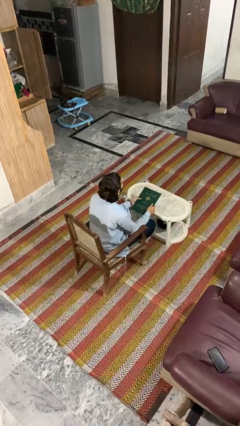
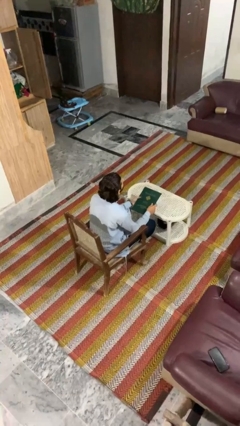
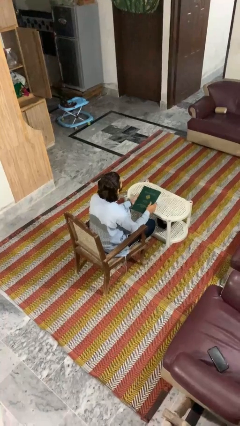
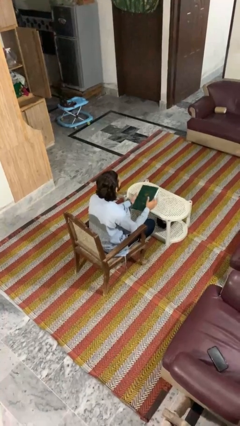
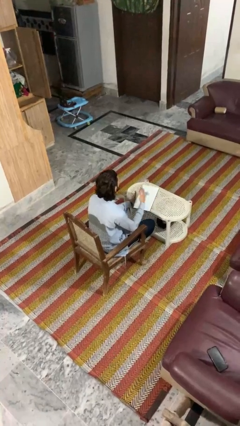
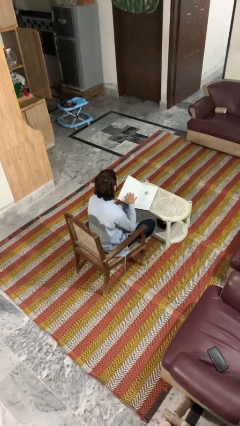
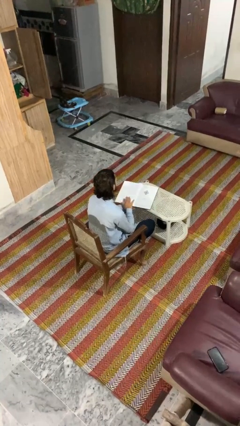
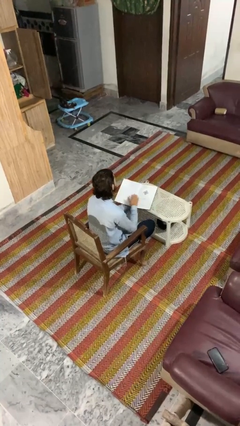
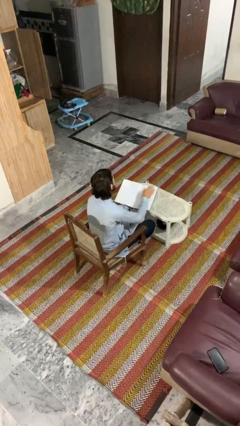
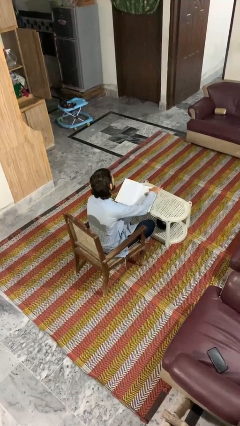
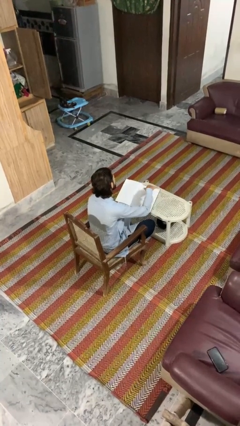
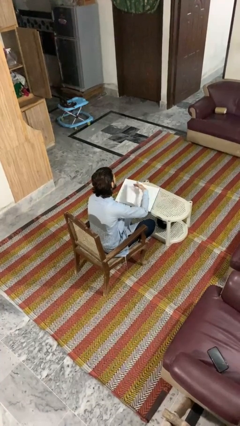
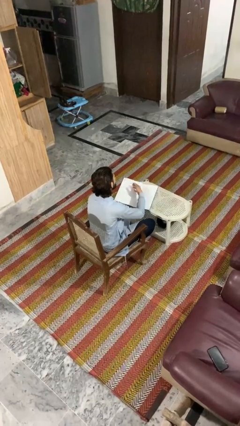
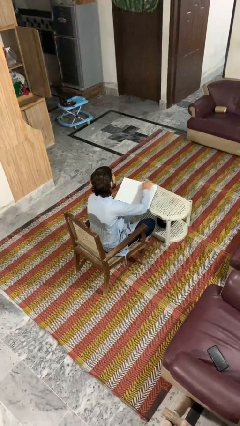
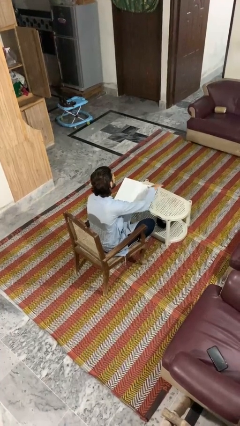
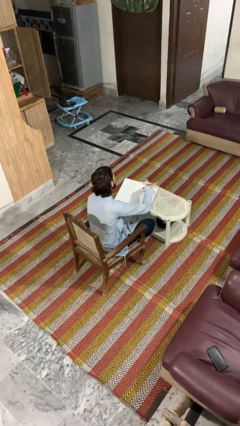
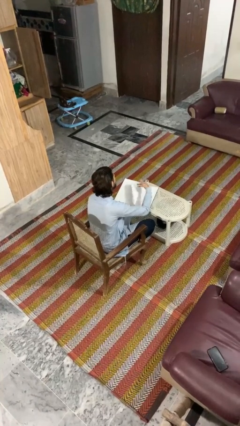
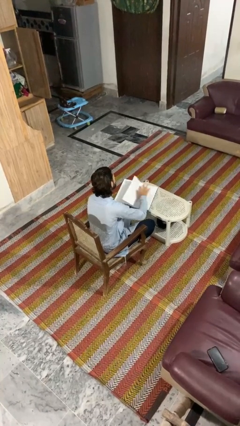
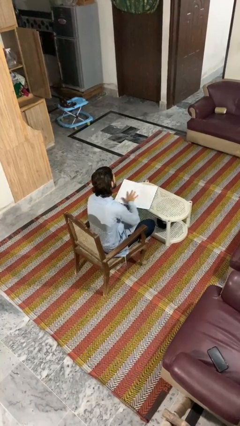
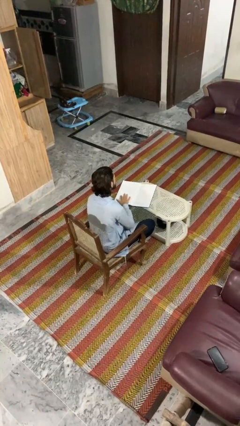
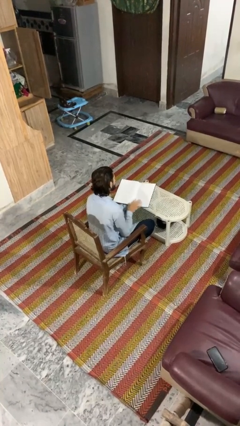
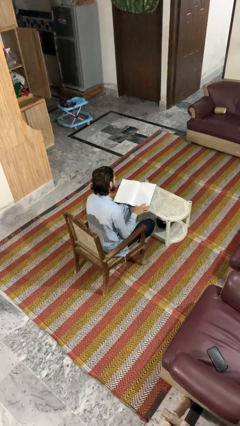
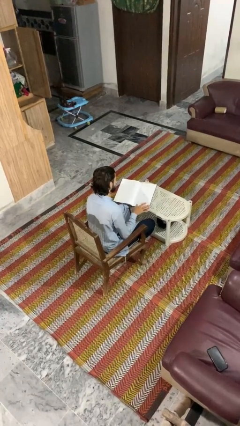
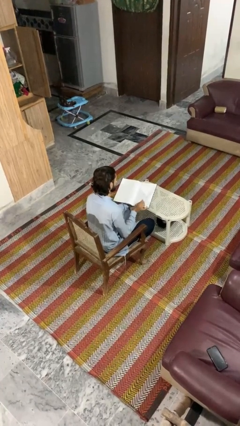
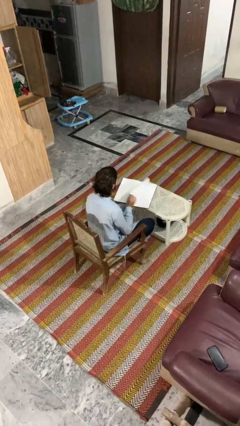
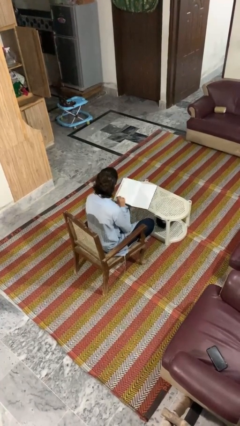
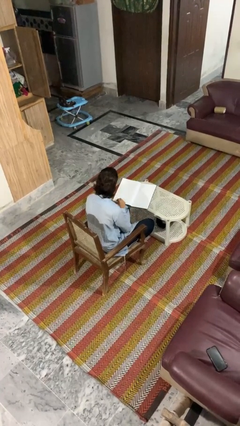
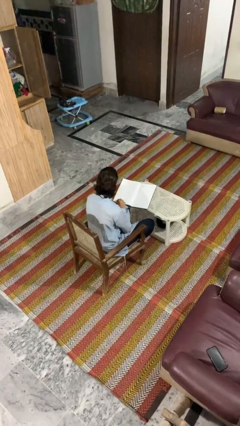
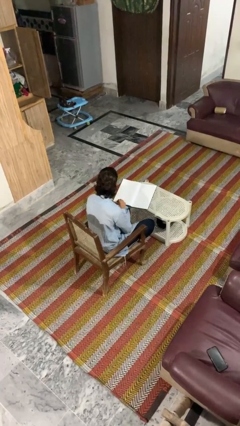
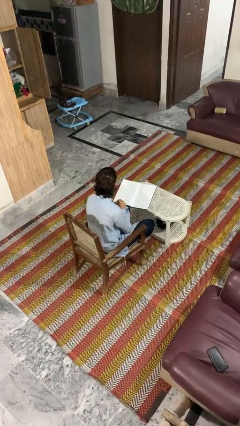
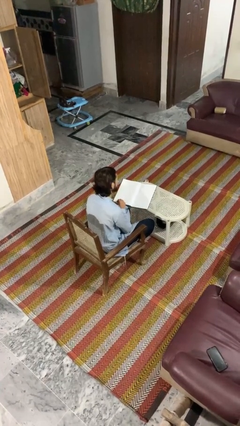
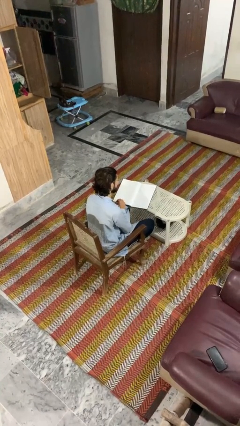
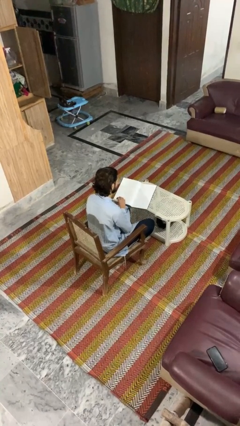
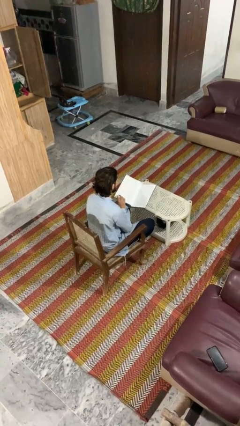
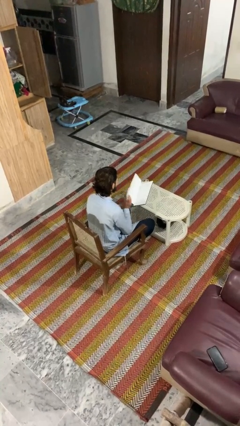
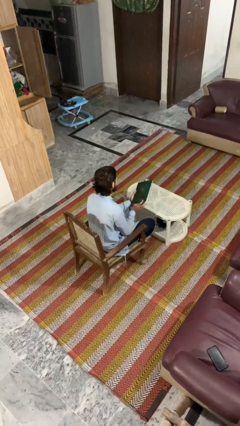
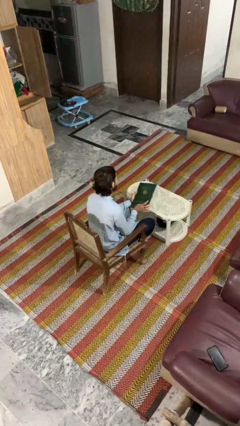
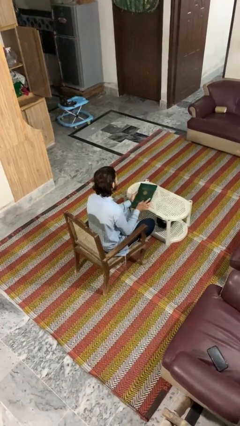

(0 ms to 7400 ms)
person reads book

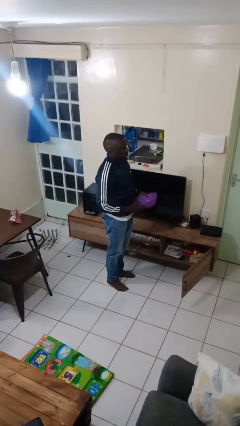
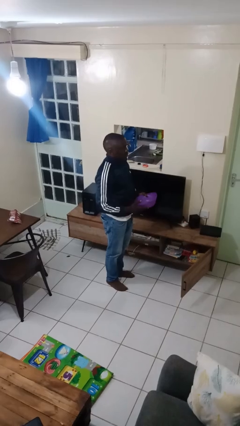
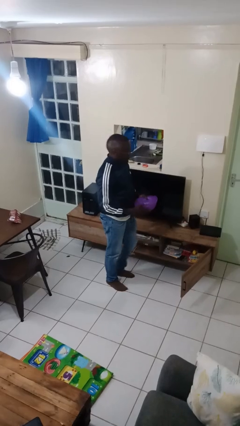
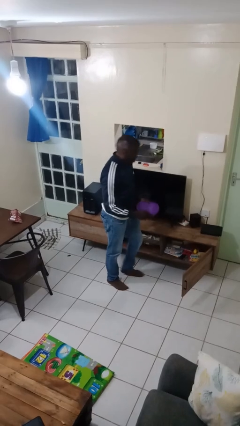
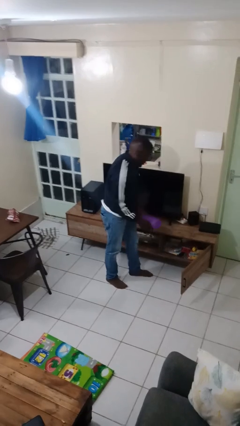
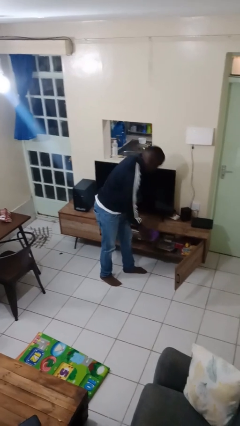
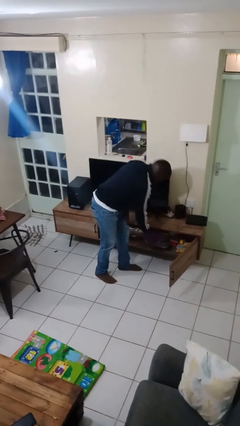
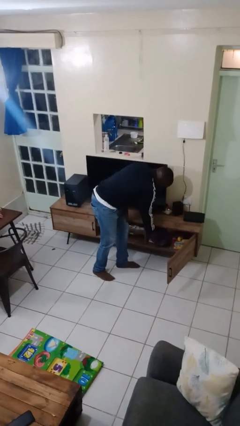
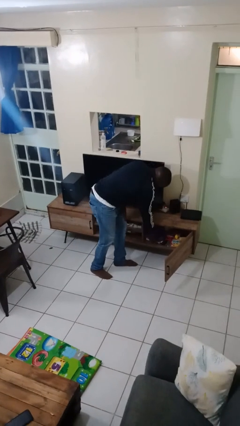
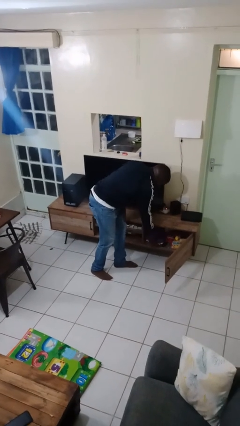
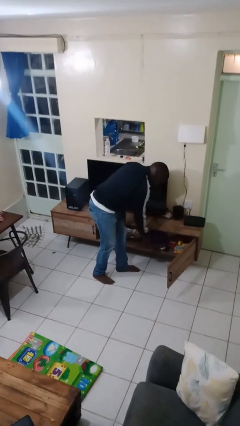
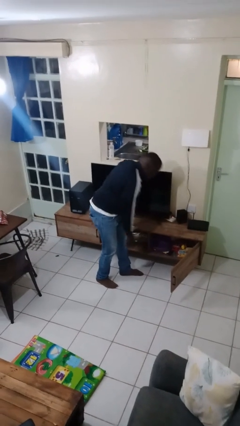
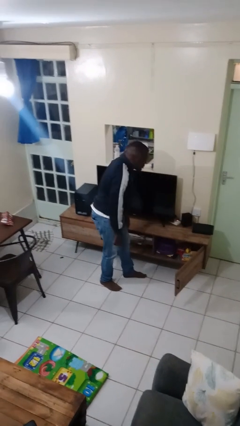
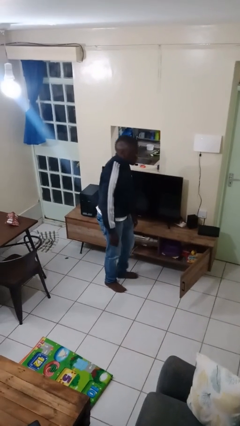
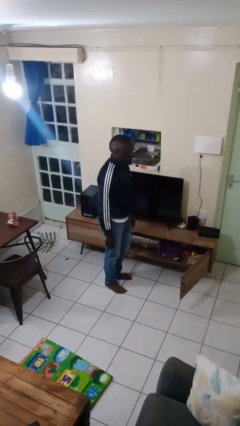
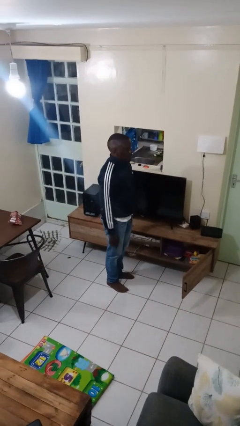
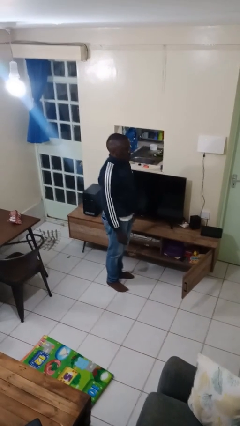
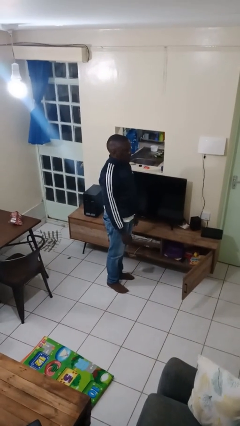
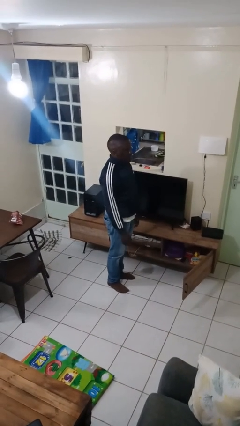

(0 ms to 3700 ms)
person puts down object into cabinet

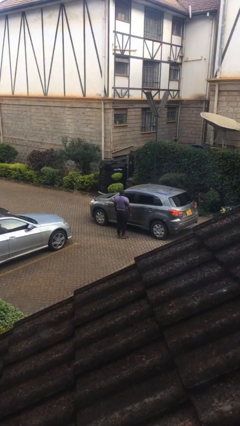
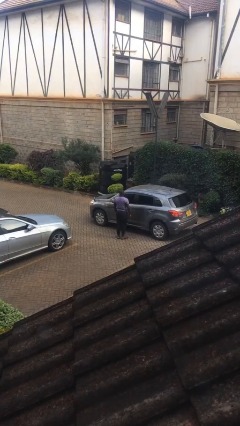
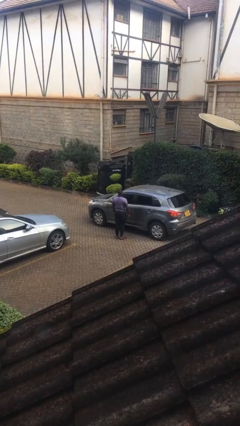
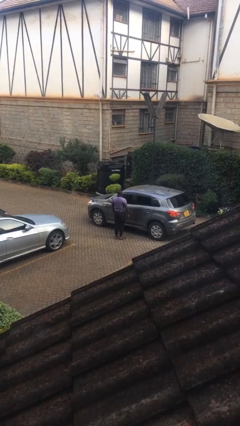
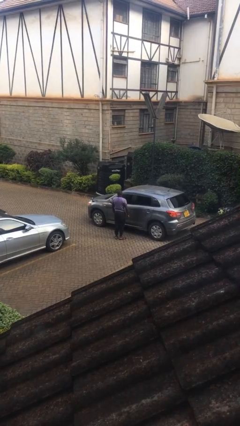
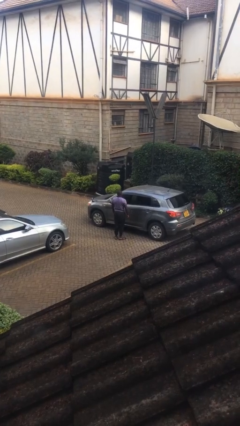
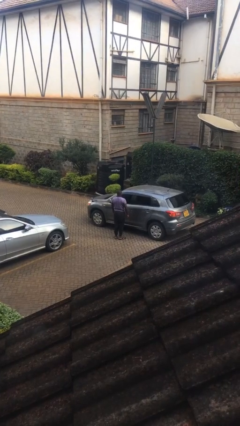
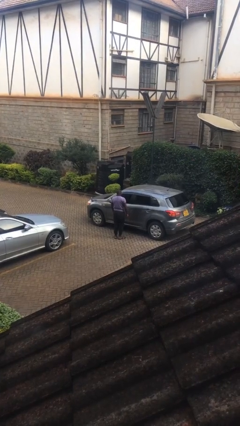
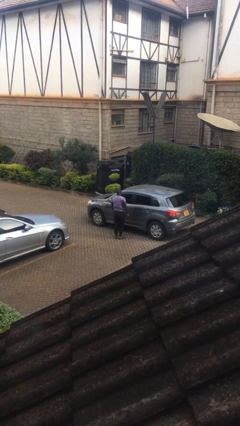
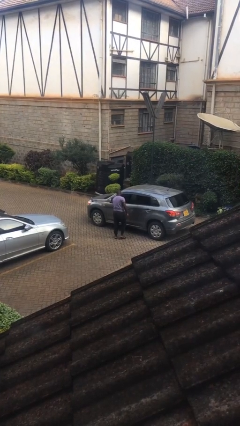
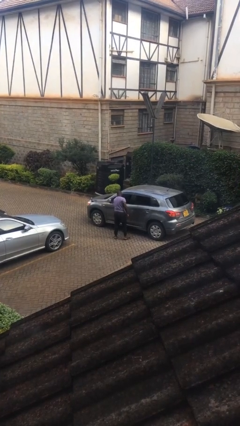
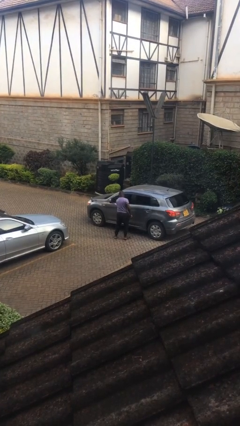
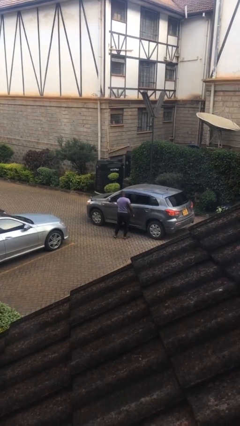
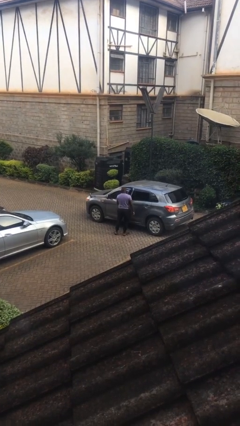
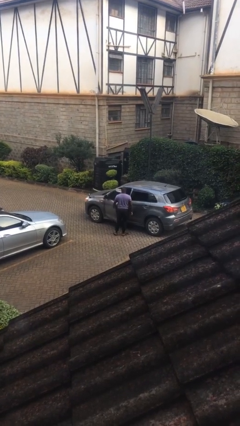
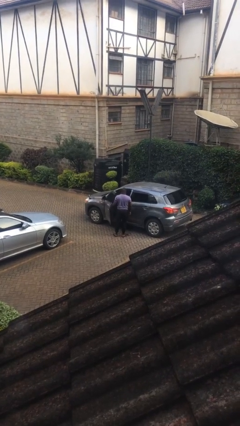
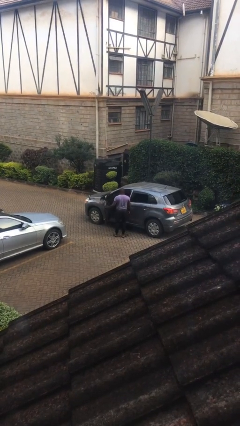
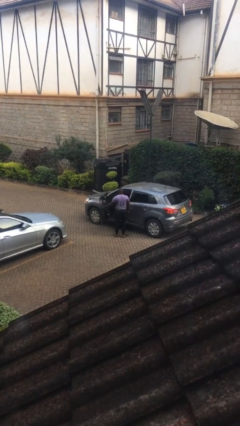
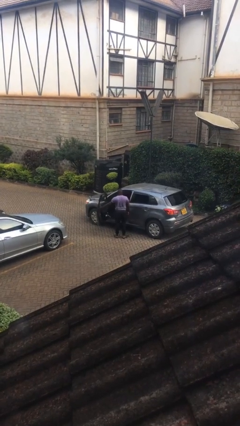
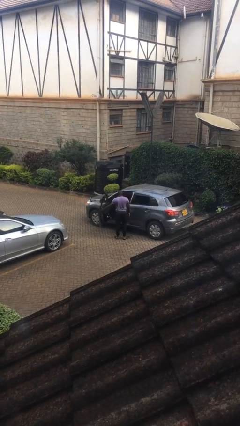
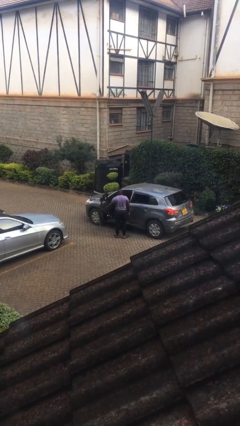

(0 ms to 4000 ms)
person opens car door

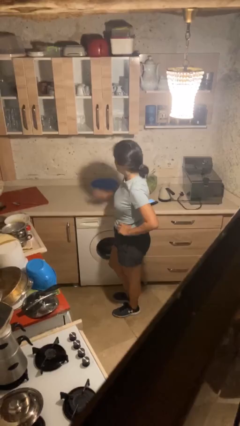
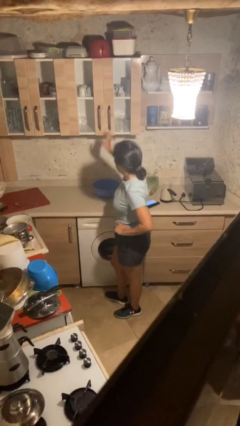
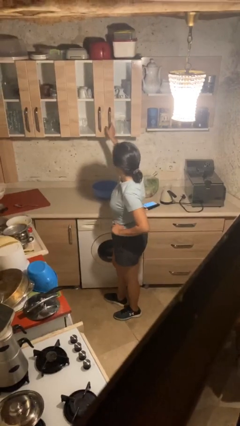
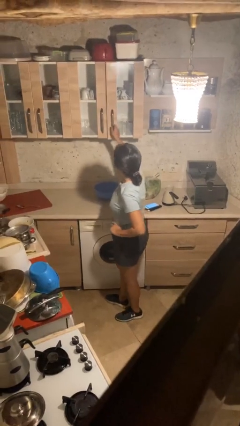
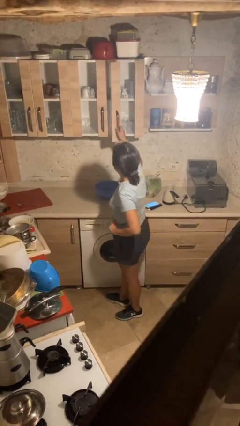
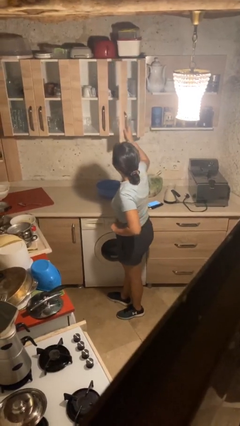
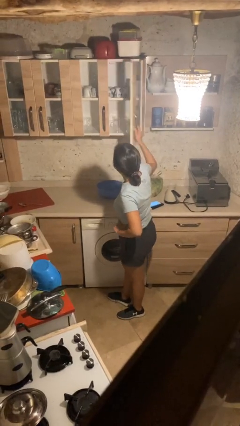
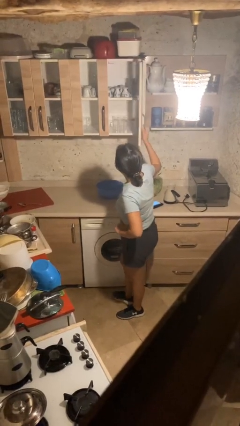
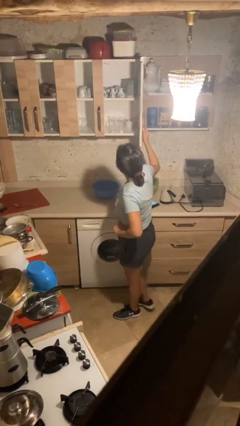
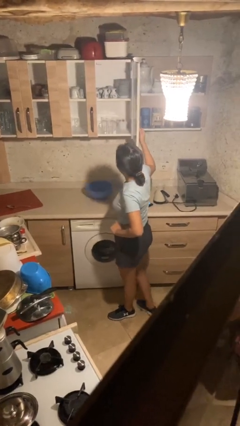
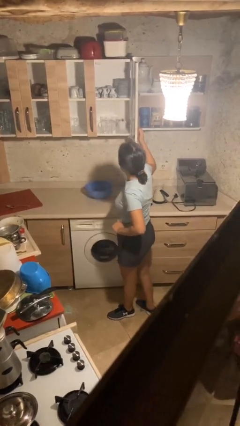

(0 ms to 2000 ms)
person closes cabinet

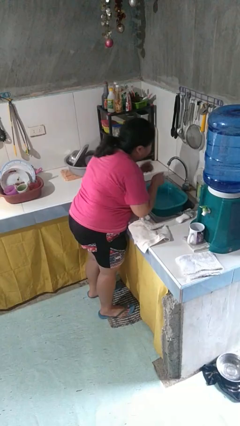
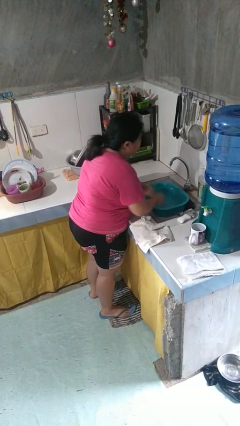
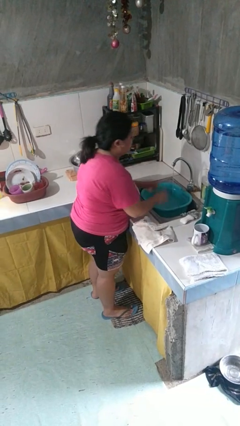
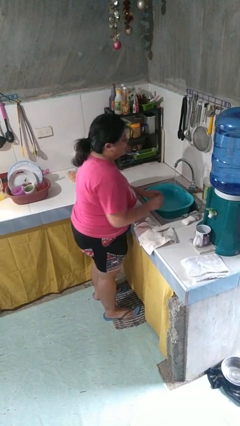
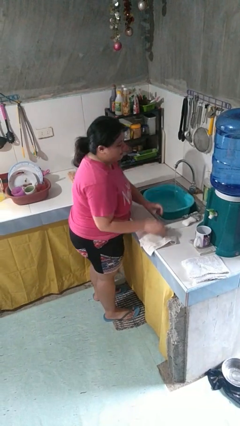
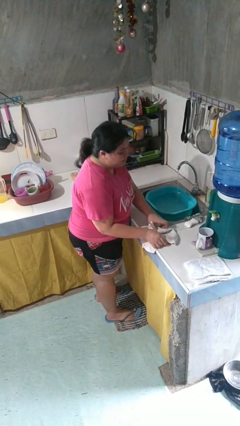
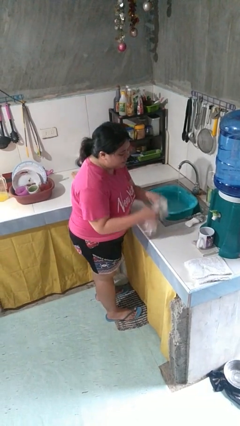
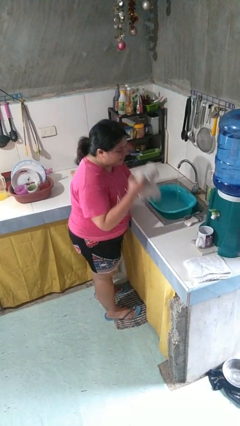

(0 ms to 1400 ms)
person dries face with towel
